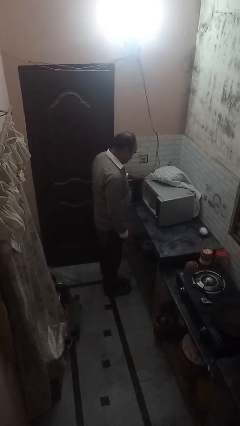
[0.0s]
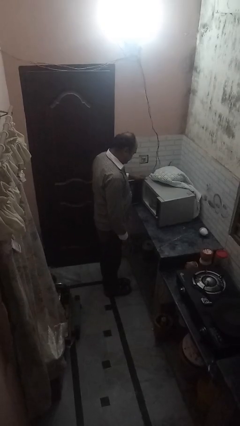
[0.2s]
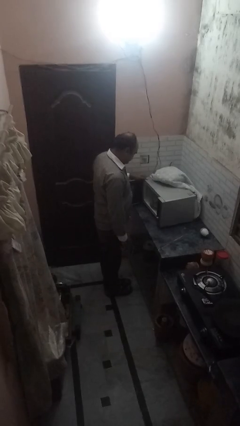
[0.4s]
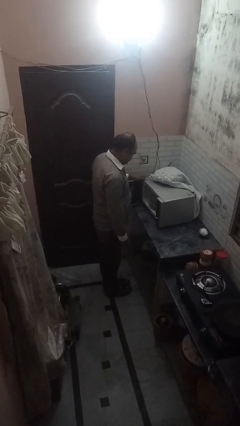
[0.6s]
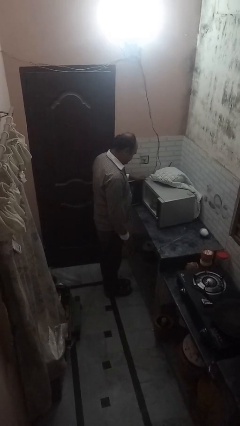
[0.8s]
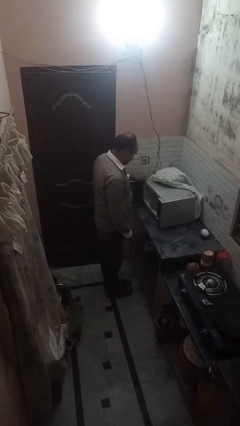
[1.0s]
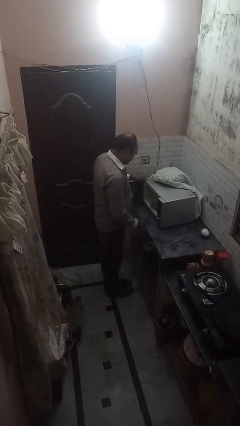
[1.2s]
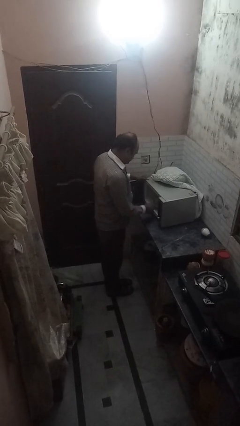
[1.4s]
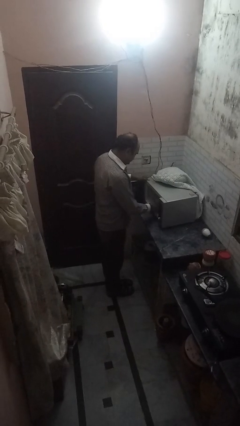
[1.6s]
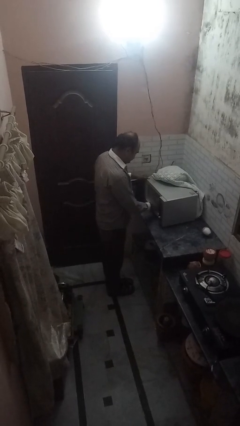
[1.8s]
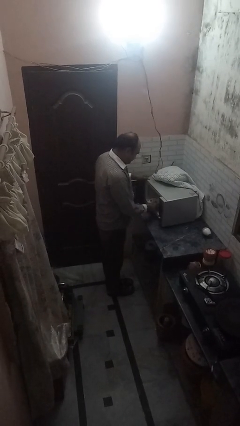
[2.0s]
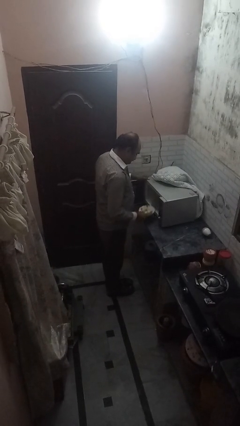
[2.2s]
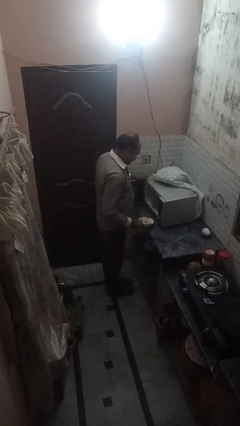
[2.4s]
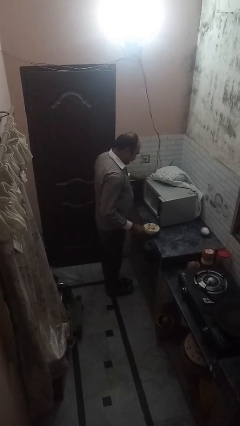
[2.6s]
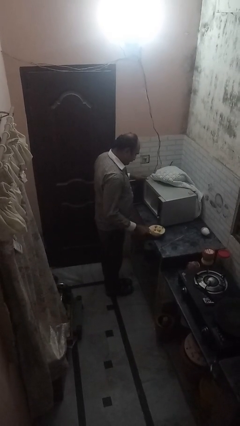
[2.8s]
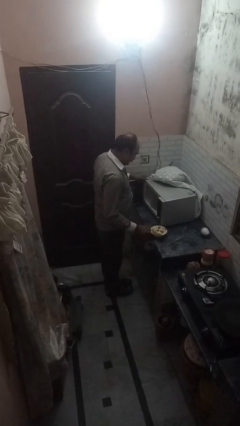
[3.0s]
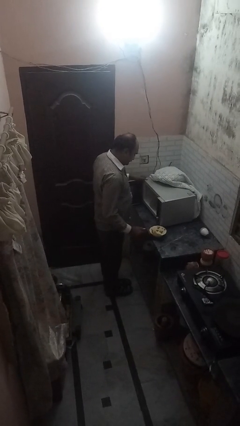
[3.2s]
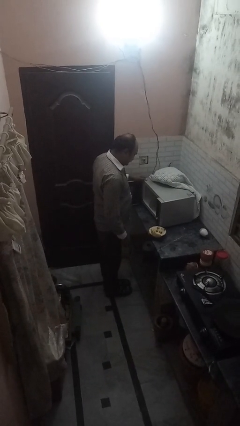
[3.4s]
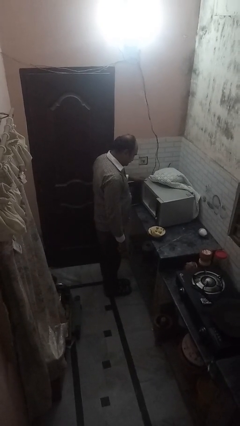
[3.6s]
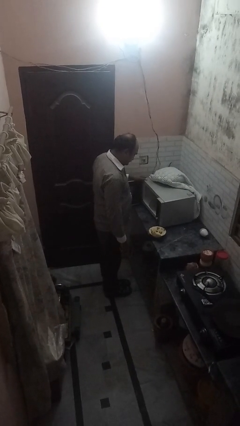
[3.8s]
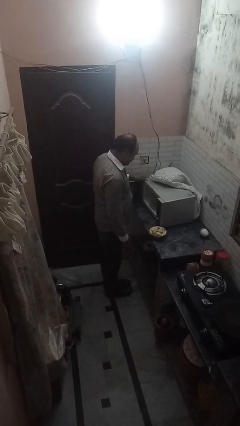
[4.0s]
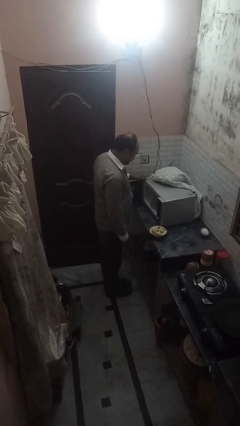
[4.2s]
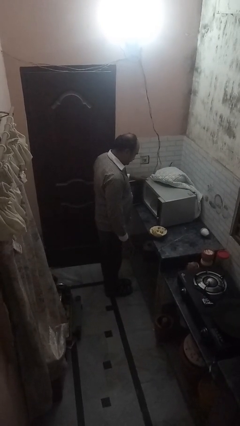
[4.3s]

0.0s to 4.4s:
person takes object from microwave

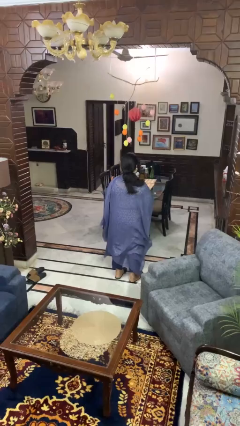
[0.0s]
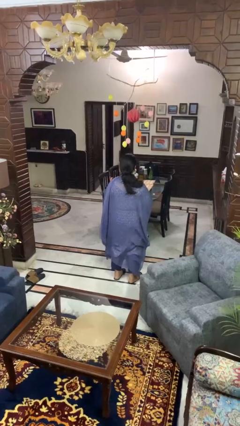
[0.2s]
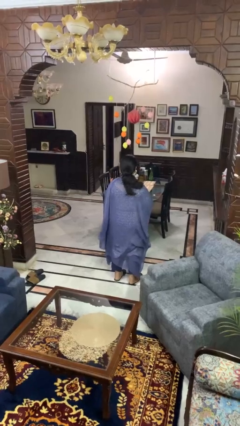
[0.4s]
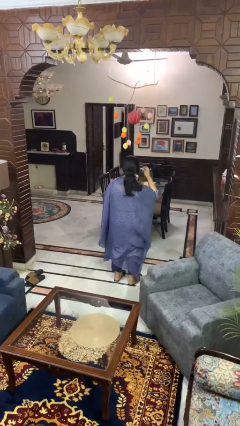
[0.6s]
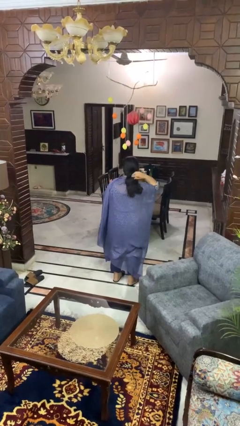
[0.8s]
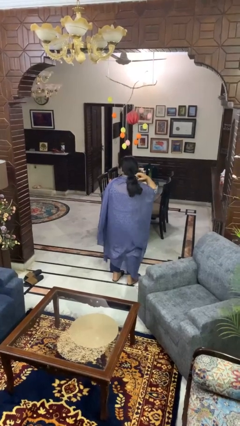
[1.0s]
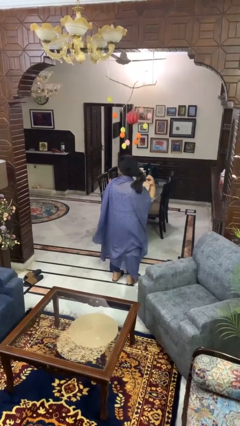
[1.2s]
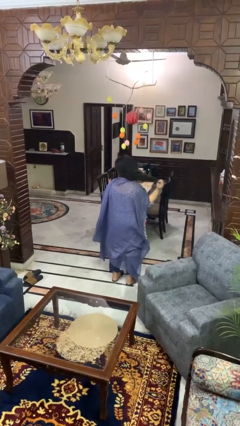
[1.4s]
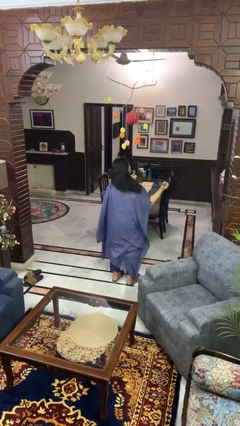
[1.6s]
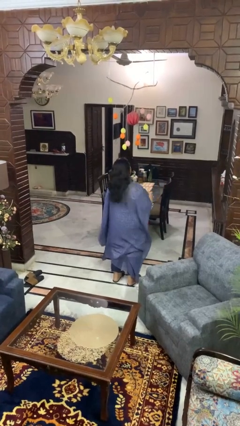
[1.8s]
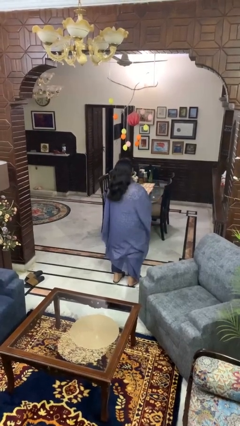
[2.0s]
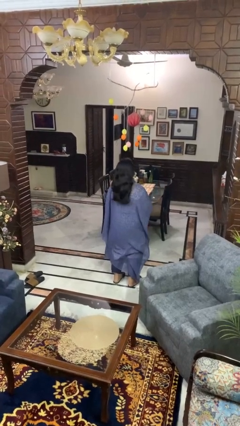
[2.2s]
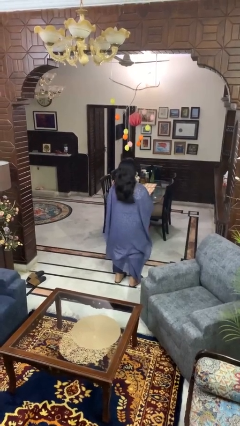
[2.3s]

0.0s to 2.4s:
person takes off hairtie

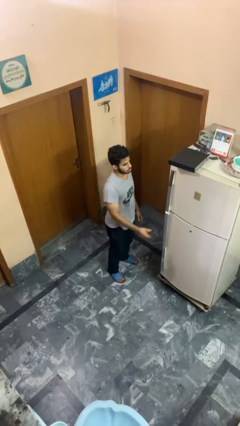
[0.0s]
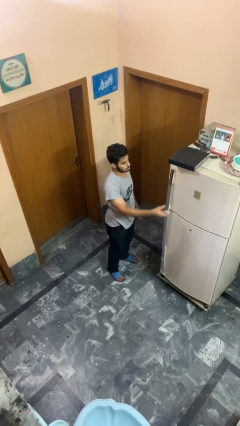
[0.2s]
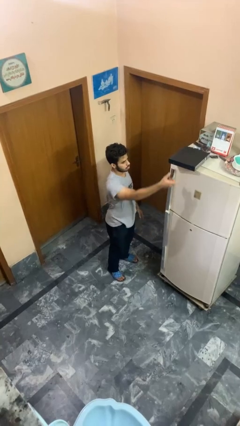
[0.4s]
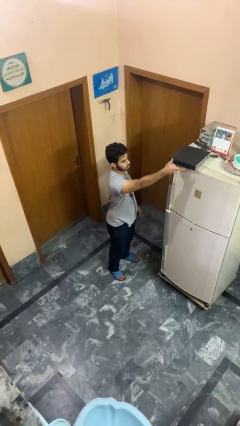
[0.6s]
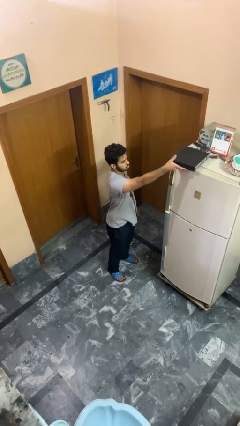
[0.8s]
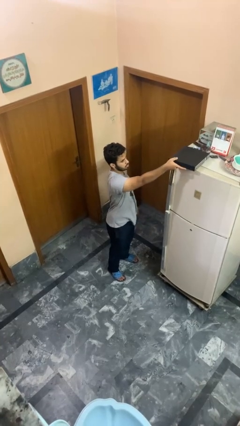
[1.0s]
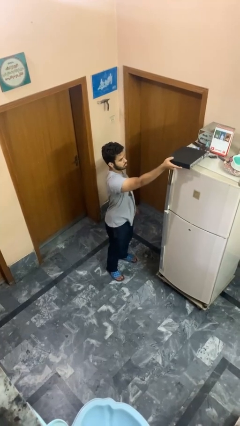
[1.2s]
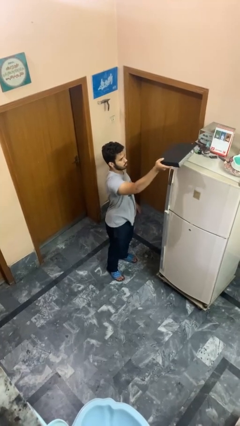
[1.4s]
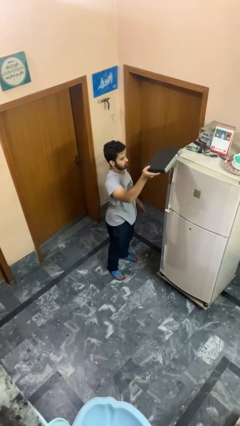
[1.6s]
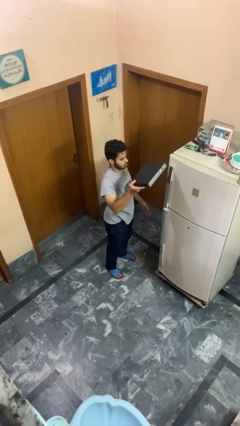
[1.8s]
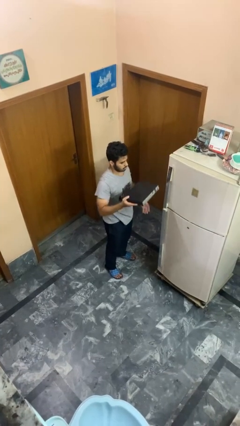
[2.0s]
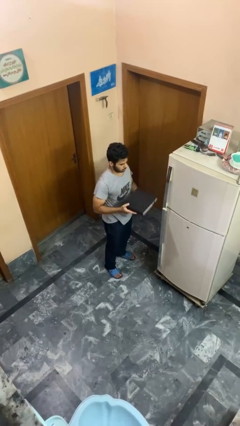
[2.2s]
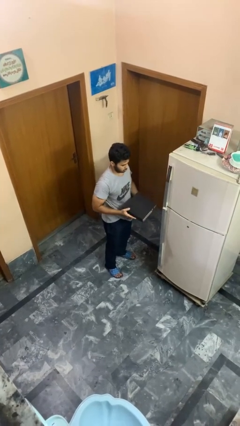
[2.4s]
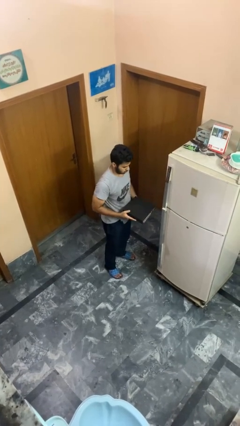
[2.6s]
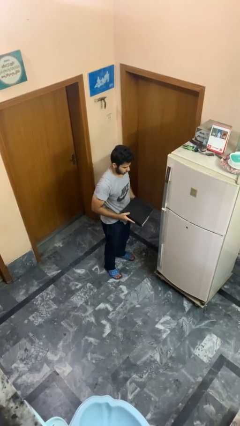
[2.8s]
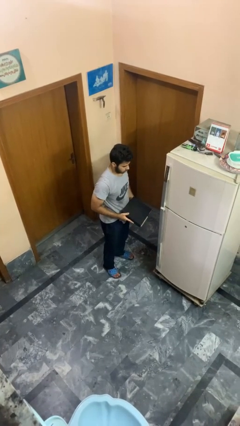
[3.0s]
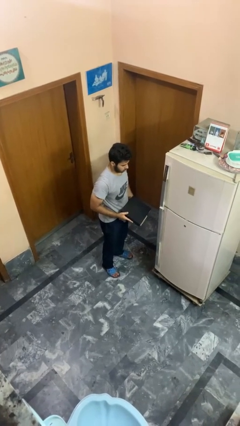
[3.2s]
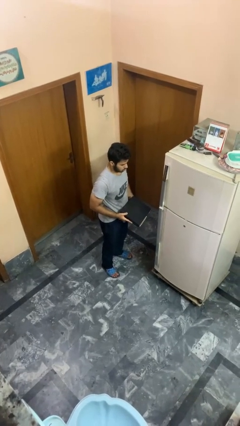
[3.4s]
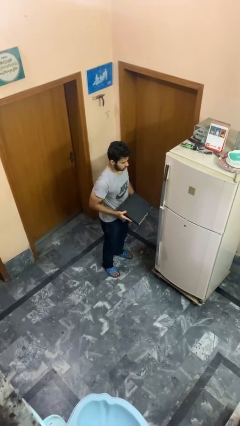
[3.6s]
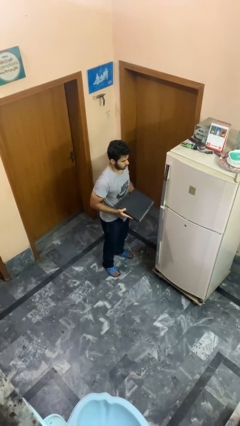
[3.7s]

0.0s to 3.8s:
person picks up object from countertop

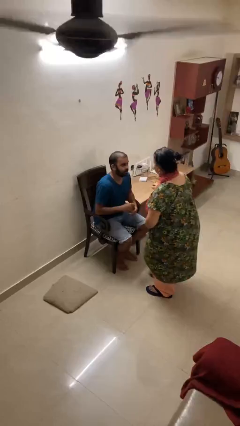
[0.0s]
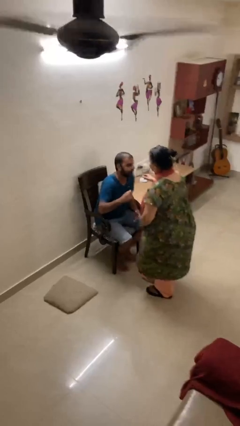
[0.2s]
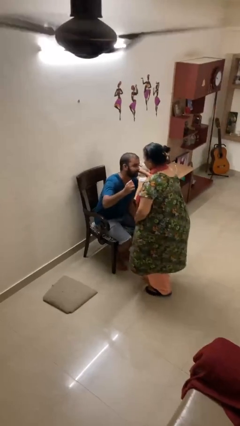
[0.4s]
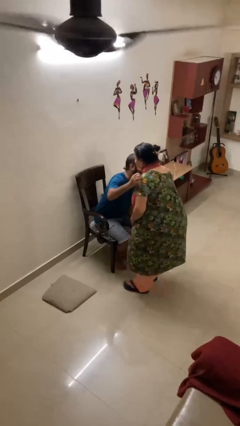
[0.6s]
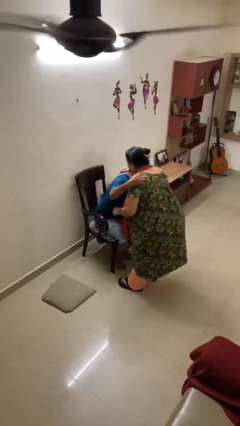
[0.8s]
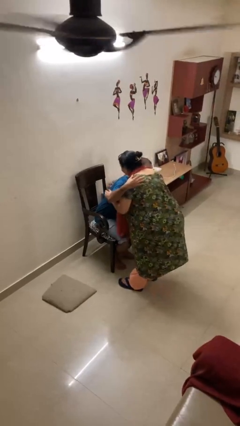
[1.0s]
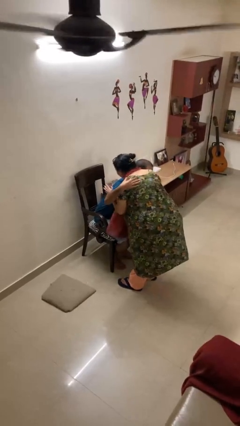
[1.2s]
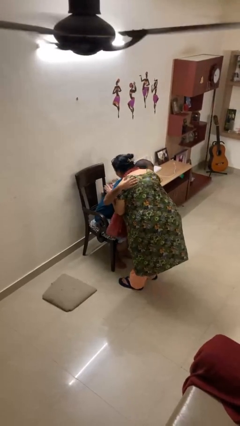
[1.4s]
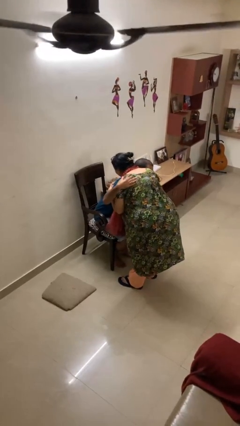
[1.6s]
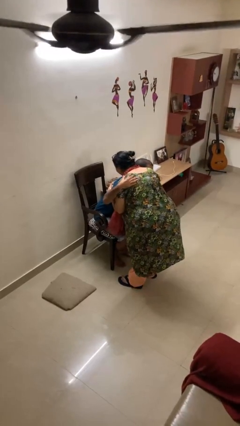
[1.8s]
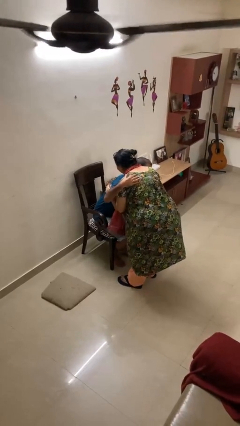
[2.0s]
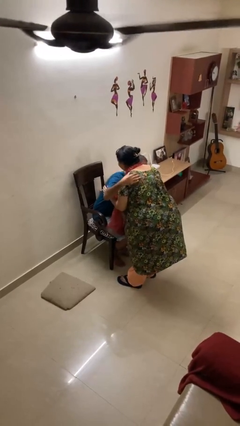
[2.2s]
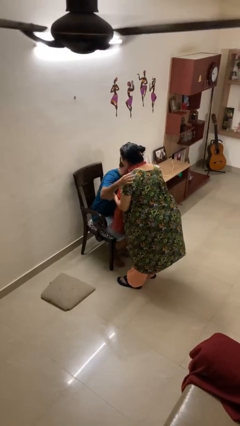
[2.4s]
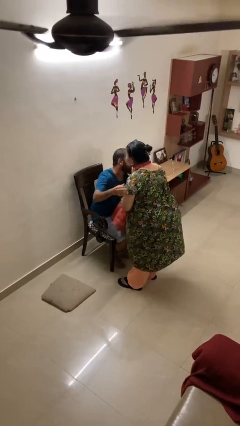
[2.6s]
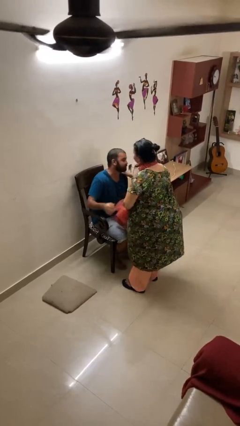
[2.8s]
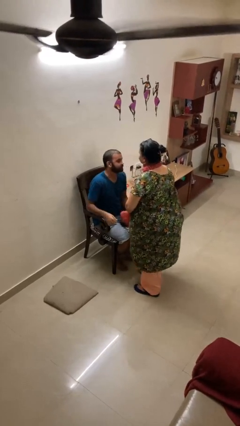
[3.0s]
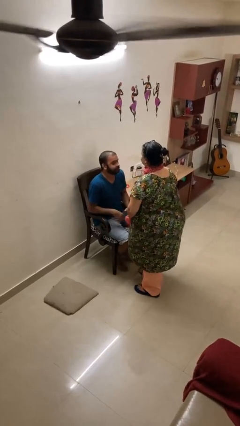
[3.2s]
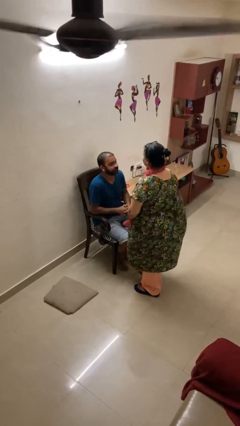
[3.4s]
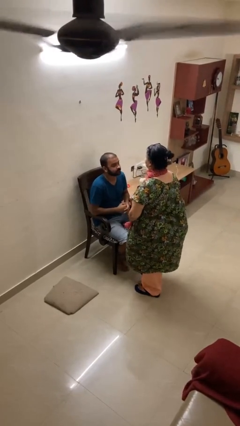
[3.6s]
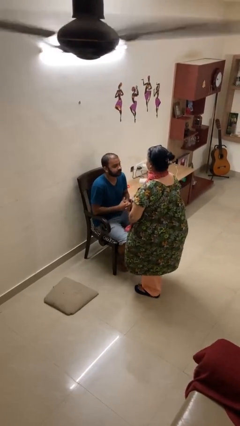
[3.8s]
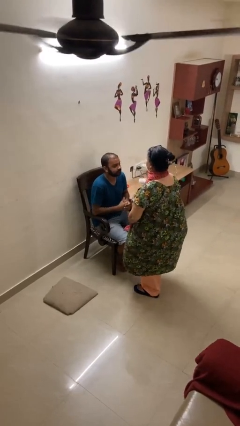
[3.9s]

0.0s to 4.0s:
person embraces person

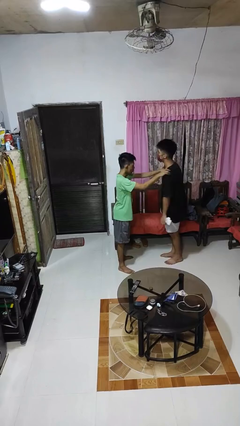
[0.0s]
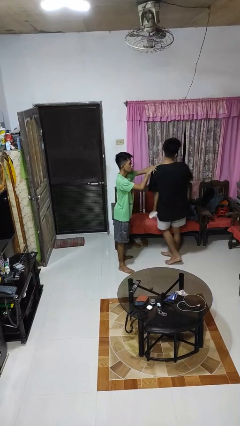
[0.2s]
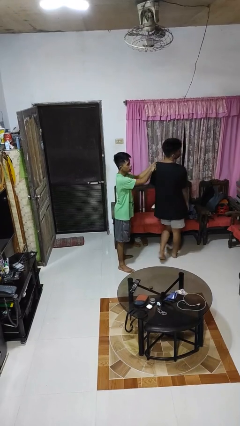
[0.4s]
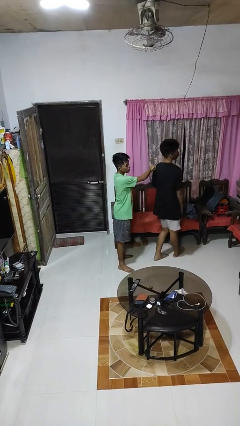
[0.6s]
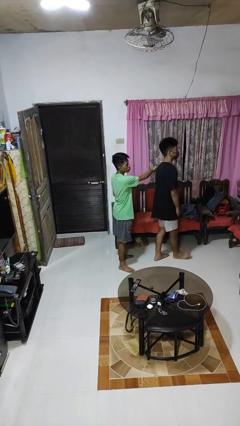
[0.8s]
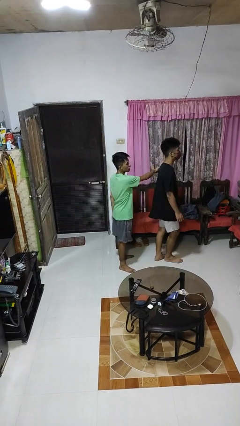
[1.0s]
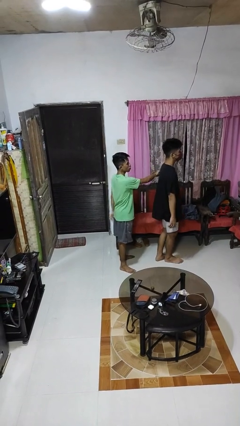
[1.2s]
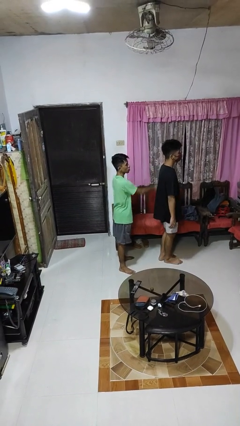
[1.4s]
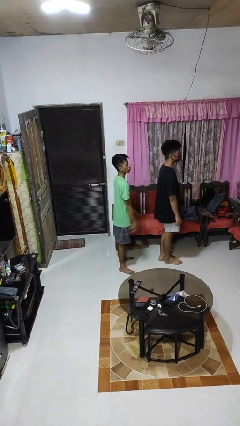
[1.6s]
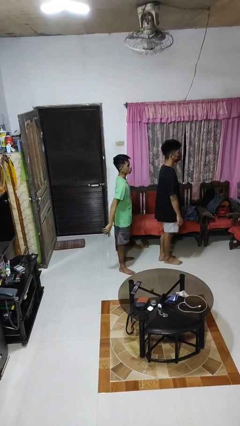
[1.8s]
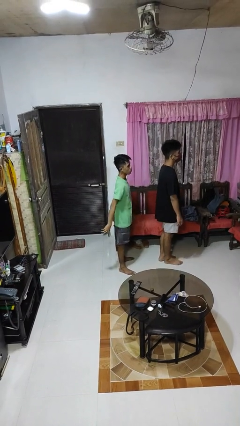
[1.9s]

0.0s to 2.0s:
person spins person around

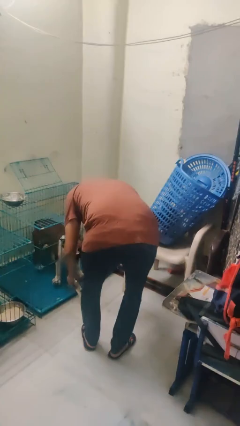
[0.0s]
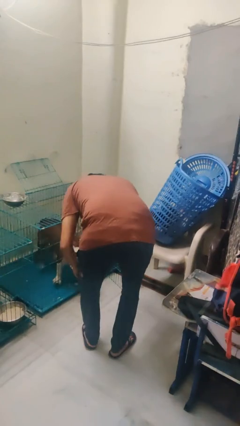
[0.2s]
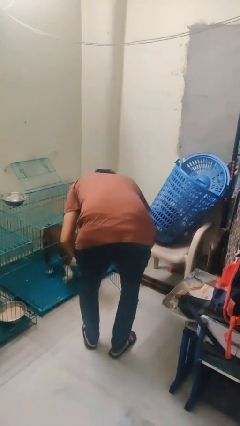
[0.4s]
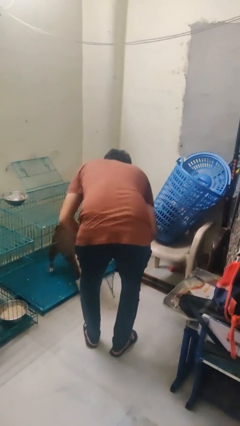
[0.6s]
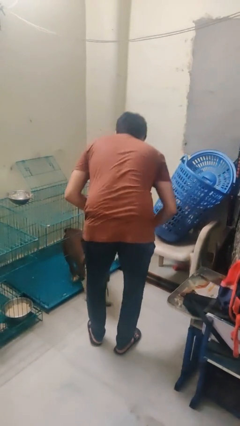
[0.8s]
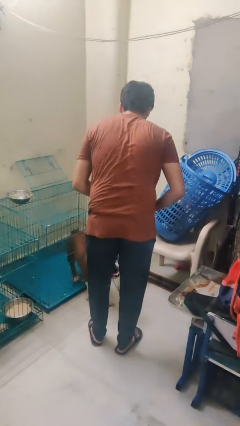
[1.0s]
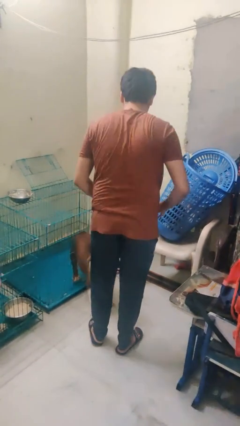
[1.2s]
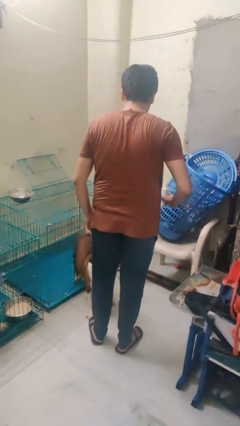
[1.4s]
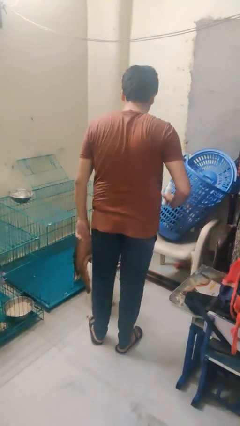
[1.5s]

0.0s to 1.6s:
person uncrates dog
